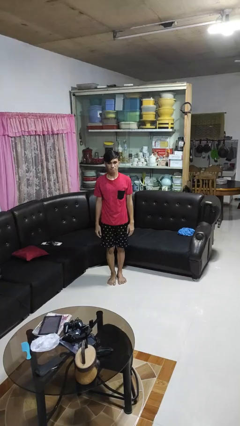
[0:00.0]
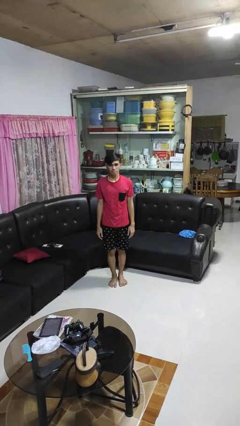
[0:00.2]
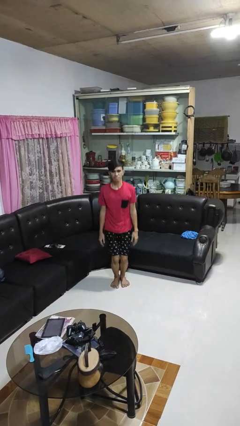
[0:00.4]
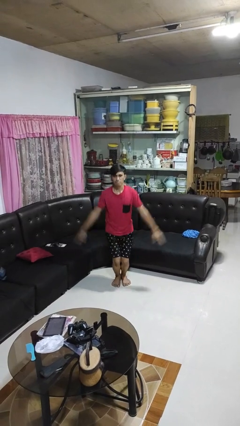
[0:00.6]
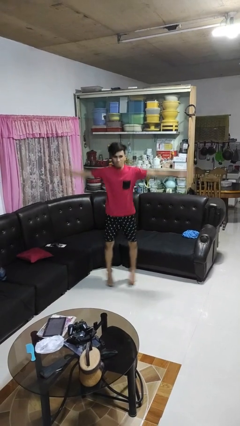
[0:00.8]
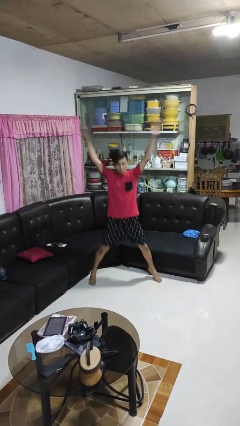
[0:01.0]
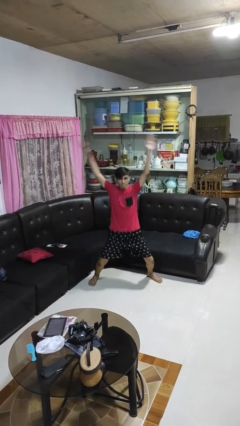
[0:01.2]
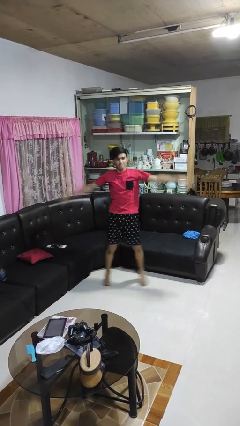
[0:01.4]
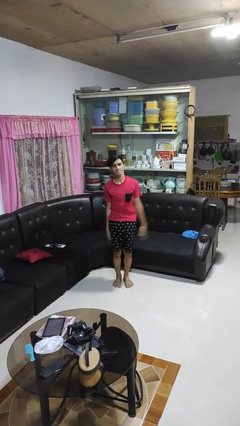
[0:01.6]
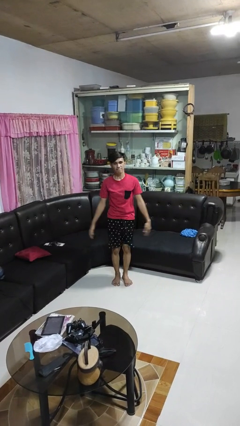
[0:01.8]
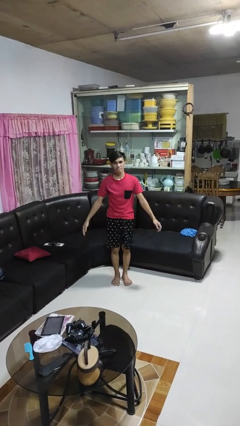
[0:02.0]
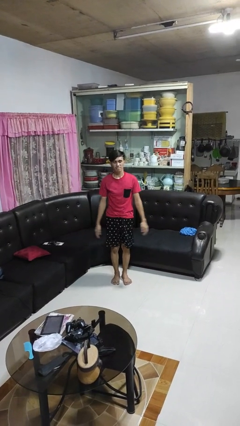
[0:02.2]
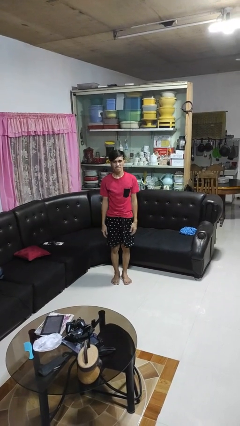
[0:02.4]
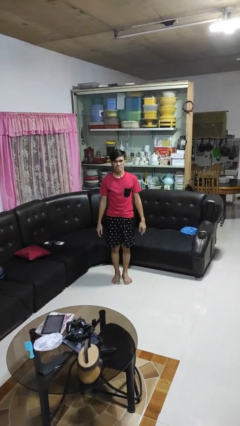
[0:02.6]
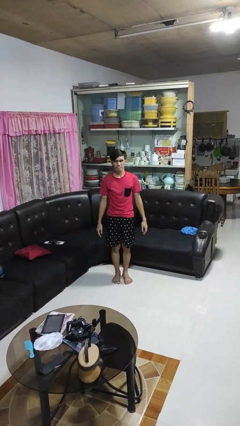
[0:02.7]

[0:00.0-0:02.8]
person exercises with jumping jacks

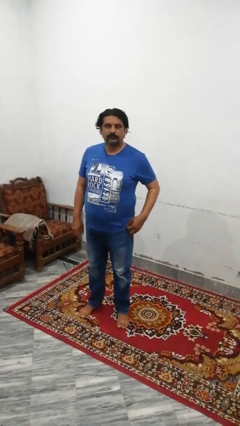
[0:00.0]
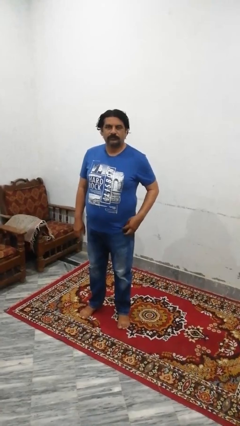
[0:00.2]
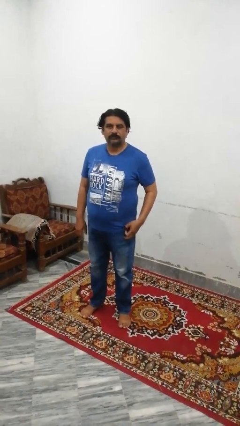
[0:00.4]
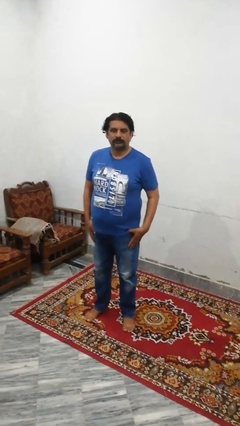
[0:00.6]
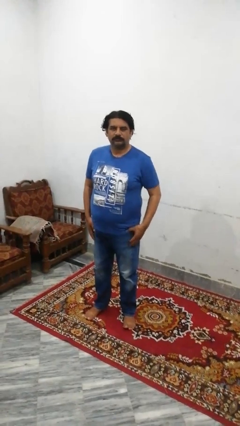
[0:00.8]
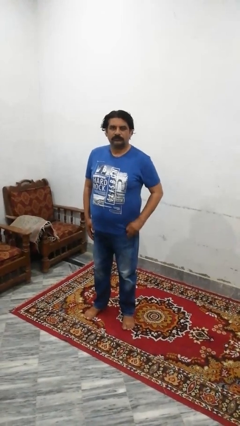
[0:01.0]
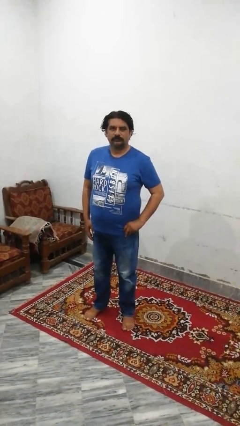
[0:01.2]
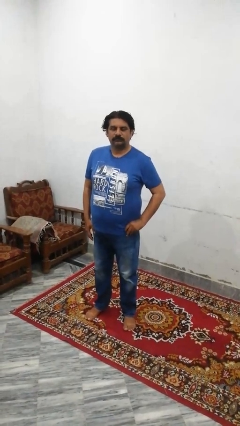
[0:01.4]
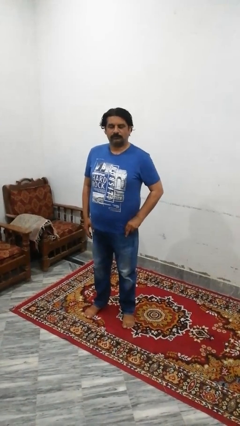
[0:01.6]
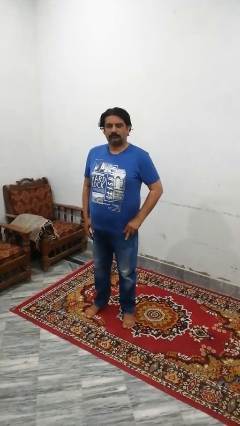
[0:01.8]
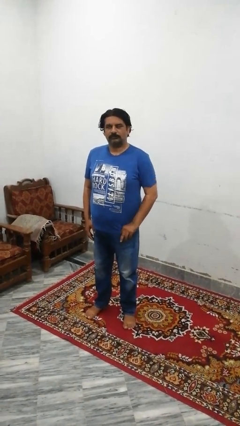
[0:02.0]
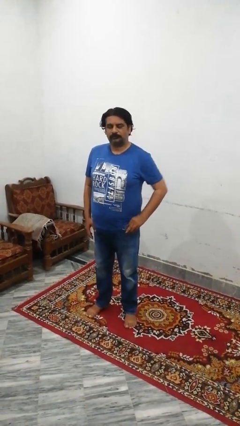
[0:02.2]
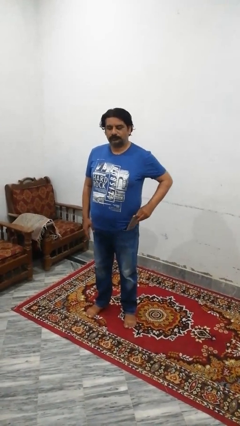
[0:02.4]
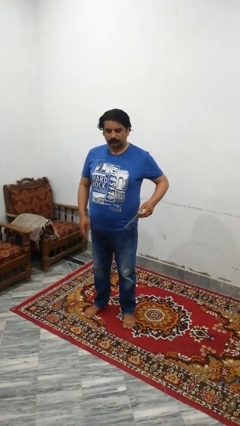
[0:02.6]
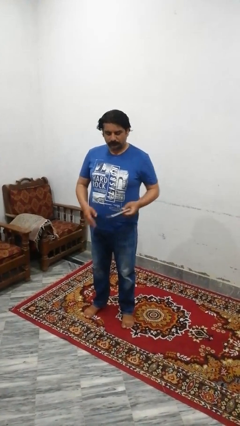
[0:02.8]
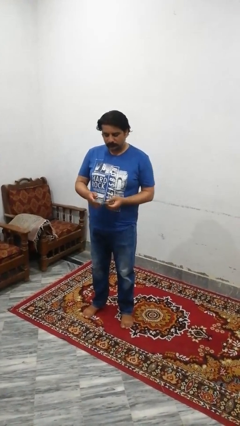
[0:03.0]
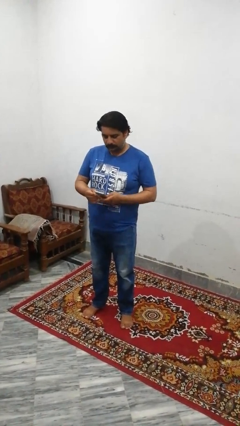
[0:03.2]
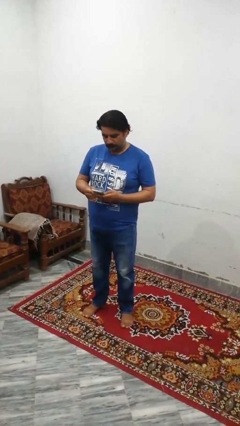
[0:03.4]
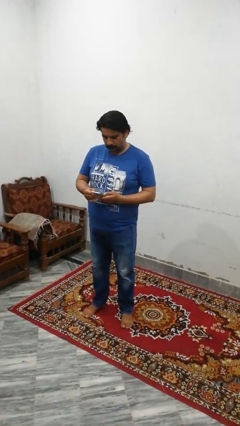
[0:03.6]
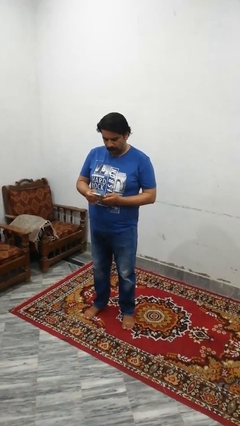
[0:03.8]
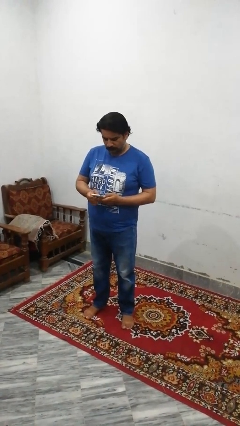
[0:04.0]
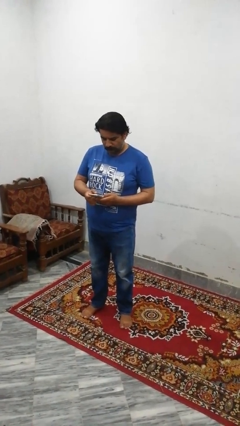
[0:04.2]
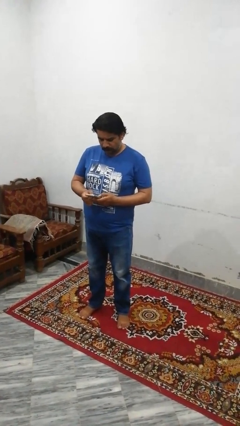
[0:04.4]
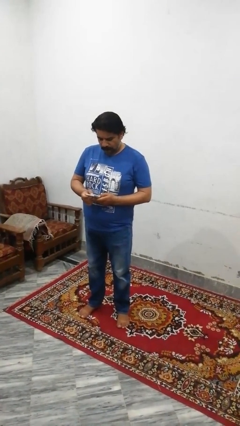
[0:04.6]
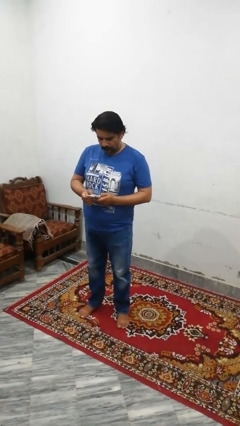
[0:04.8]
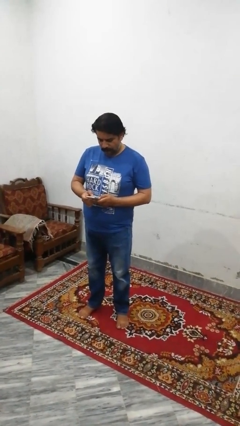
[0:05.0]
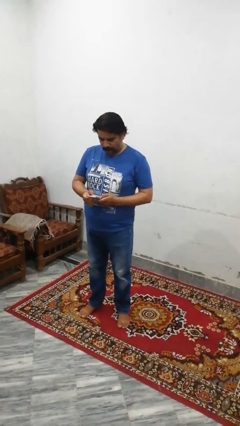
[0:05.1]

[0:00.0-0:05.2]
person takes phone from pocket

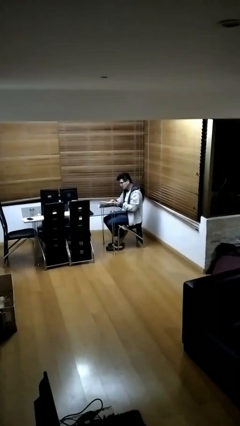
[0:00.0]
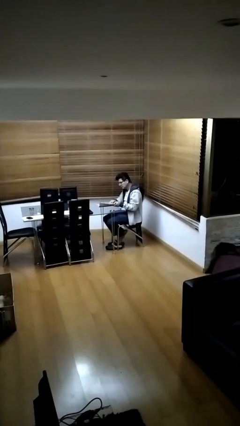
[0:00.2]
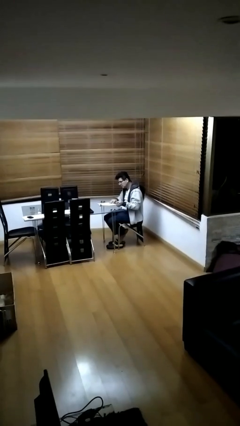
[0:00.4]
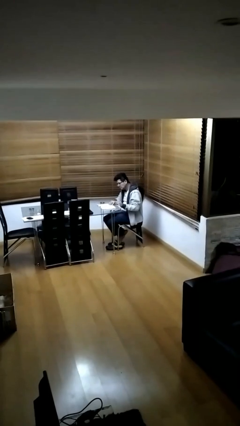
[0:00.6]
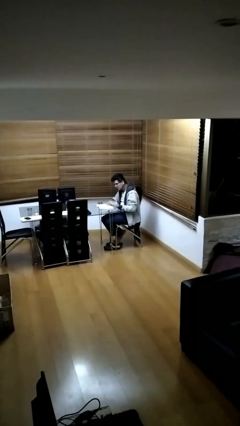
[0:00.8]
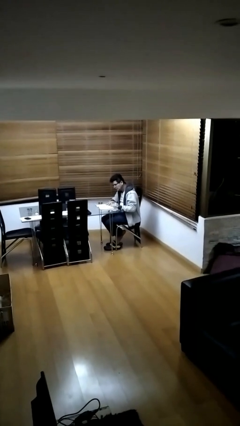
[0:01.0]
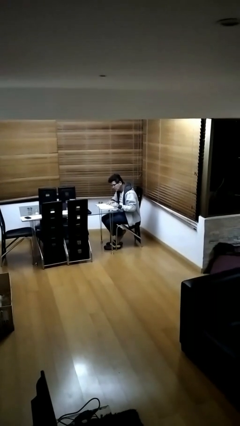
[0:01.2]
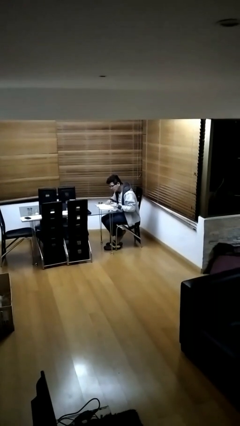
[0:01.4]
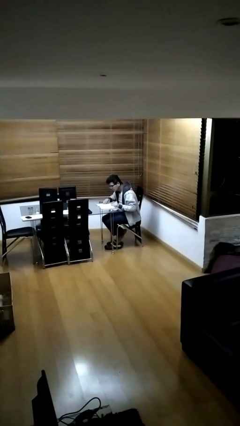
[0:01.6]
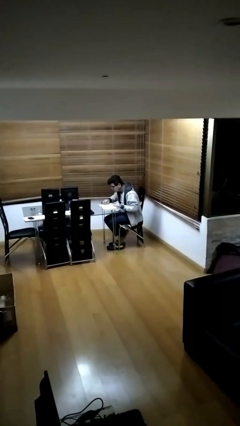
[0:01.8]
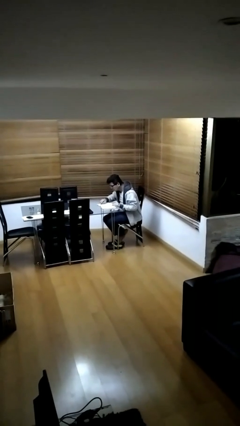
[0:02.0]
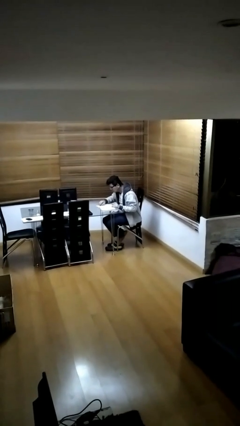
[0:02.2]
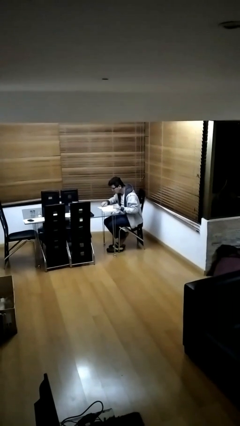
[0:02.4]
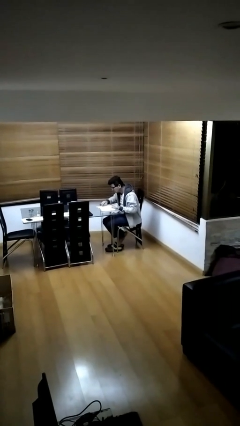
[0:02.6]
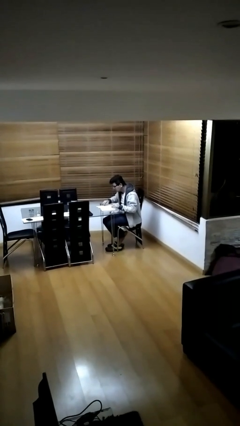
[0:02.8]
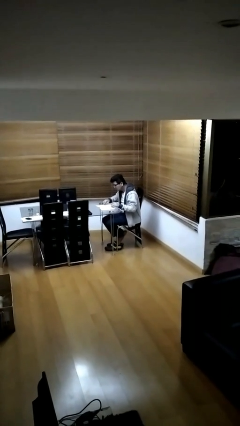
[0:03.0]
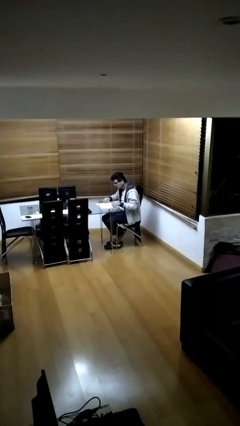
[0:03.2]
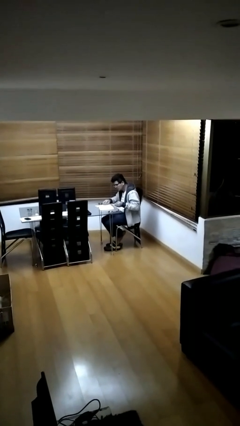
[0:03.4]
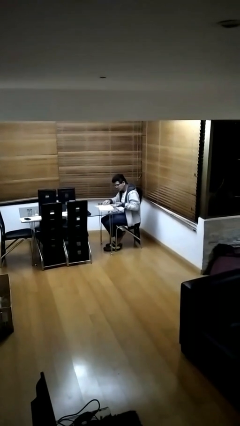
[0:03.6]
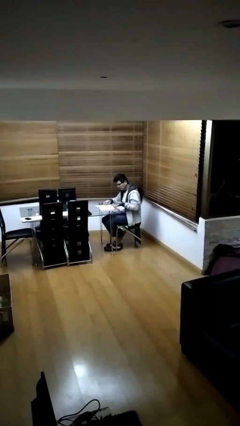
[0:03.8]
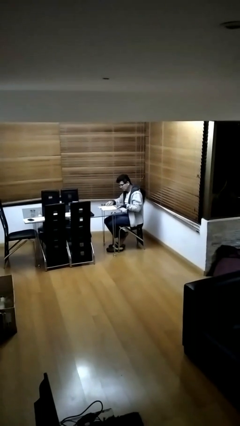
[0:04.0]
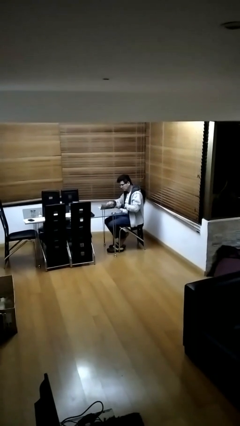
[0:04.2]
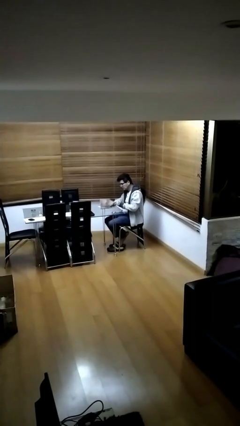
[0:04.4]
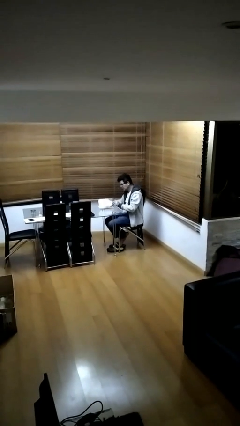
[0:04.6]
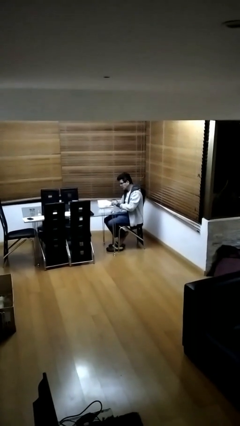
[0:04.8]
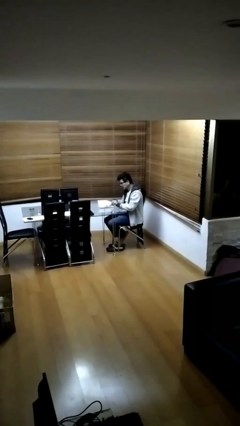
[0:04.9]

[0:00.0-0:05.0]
person reads document

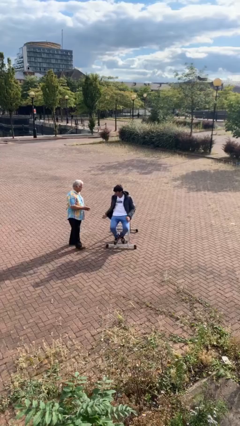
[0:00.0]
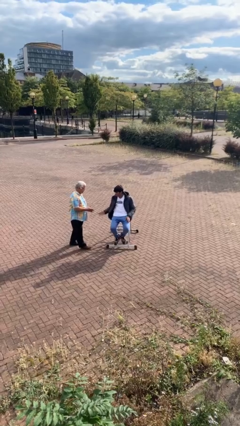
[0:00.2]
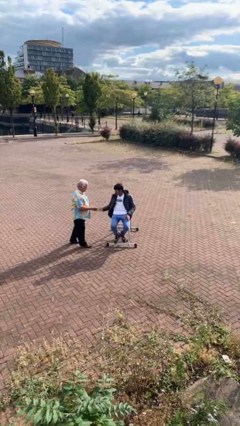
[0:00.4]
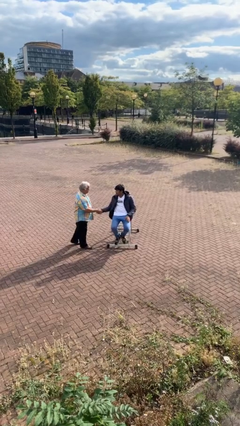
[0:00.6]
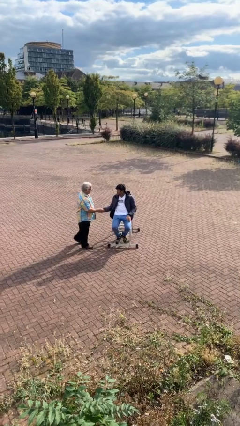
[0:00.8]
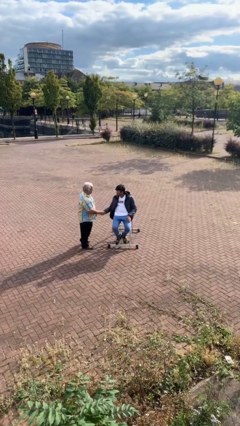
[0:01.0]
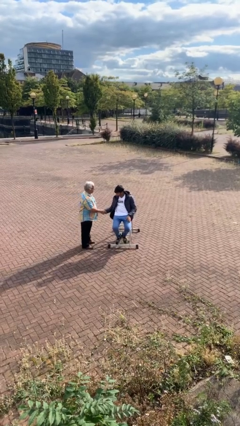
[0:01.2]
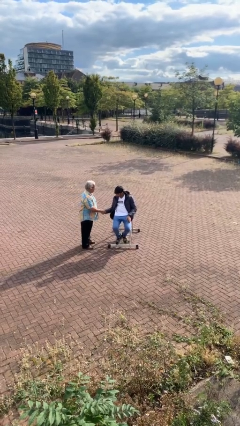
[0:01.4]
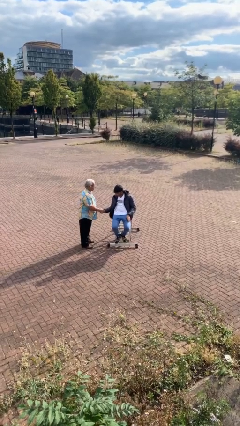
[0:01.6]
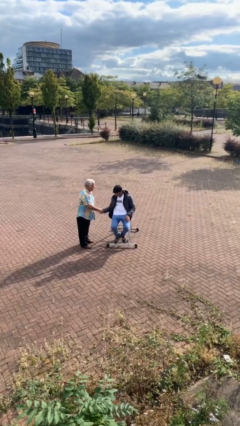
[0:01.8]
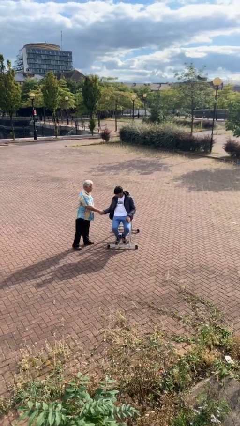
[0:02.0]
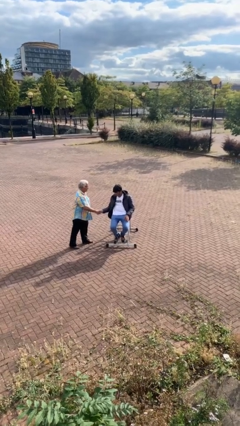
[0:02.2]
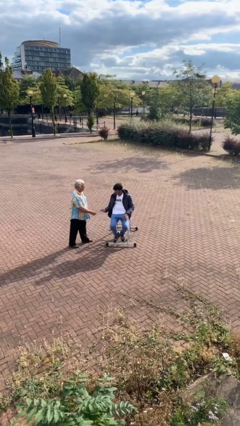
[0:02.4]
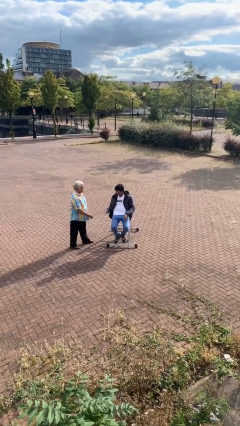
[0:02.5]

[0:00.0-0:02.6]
person shakes hand

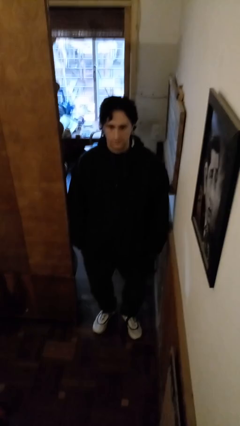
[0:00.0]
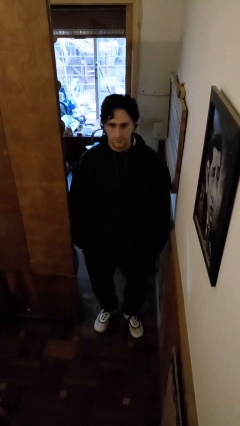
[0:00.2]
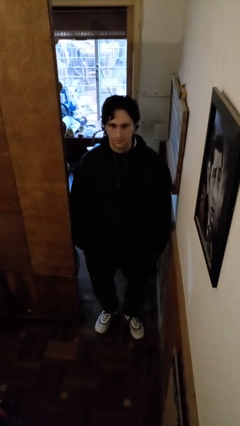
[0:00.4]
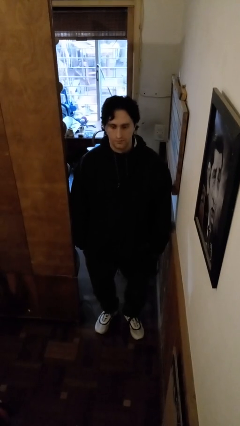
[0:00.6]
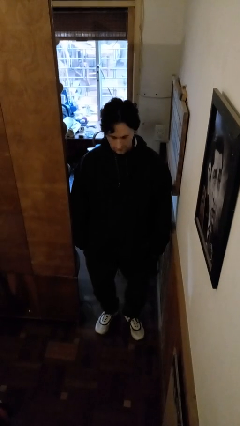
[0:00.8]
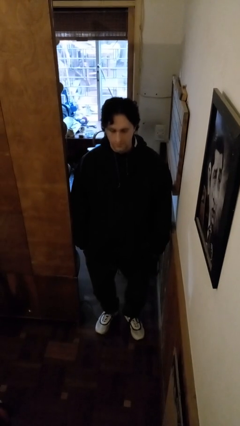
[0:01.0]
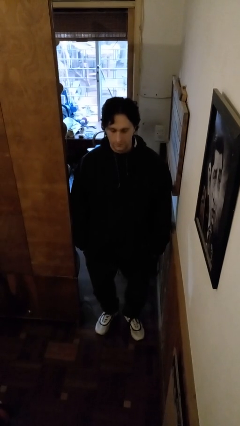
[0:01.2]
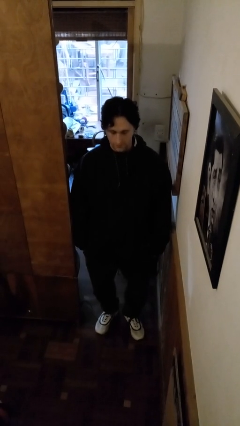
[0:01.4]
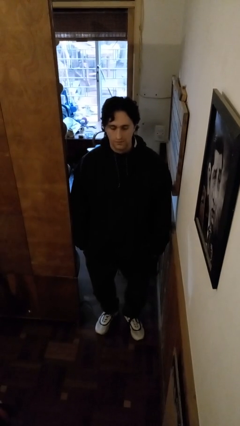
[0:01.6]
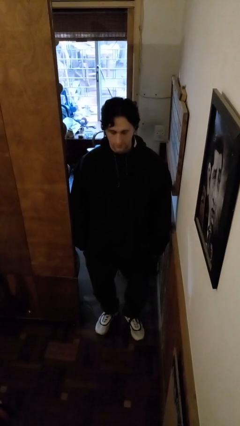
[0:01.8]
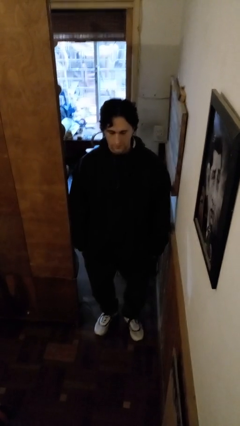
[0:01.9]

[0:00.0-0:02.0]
person nods head

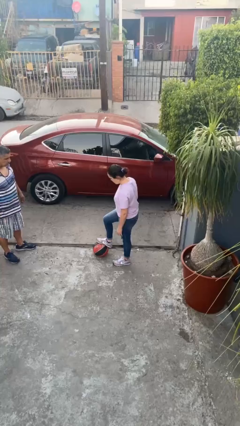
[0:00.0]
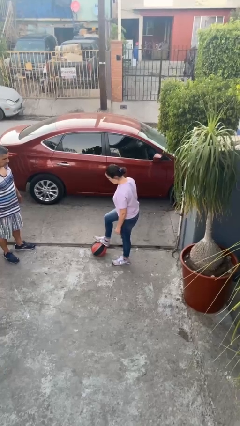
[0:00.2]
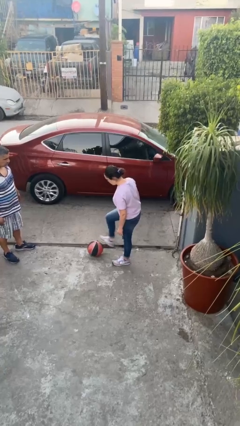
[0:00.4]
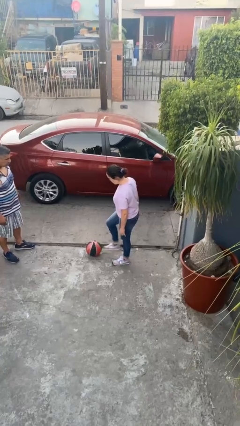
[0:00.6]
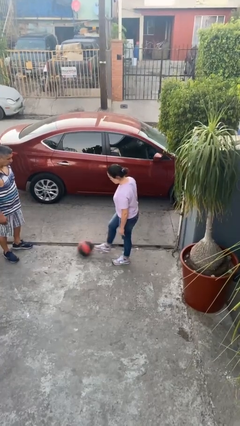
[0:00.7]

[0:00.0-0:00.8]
person kicks object to person
